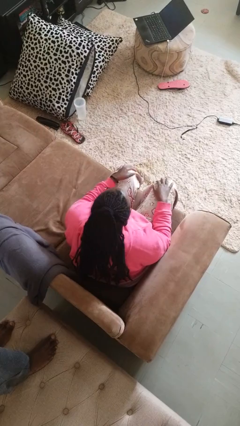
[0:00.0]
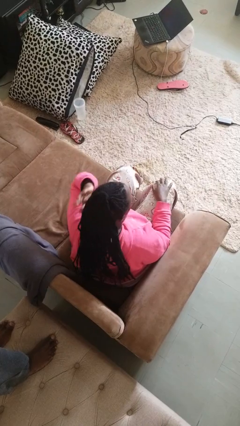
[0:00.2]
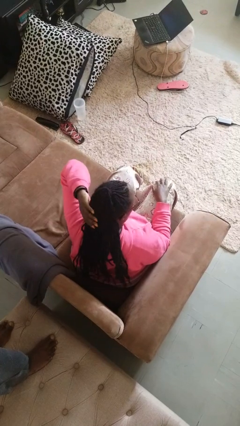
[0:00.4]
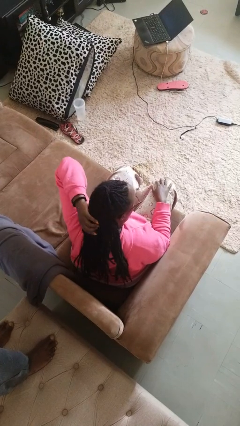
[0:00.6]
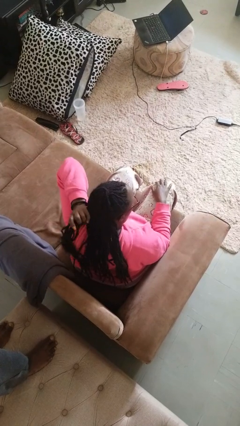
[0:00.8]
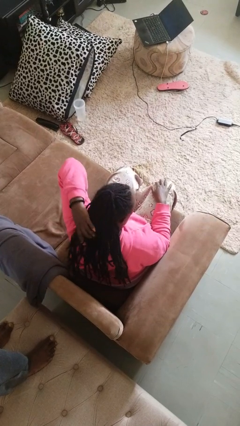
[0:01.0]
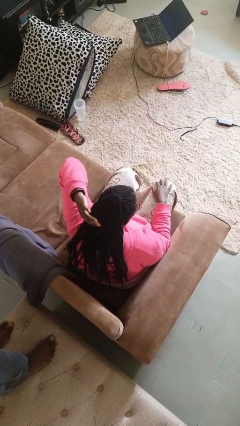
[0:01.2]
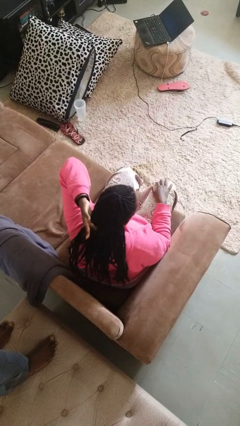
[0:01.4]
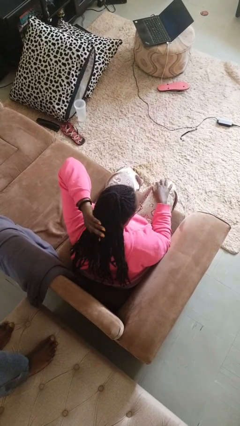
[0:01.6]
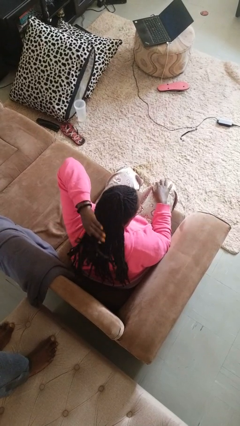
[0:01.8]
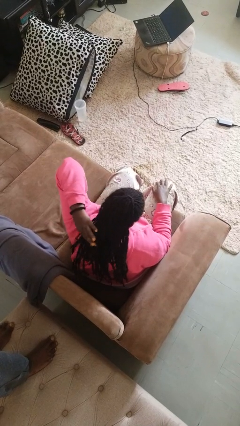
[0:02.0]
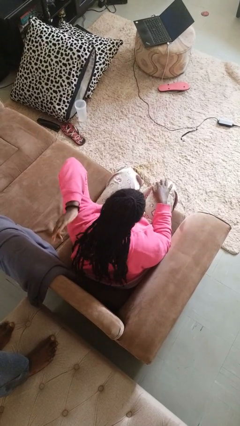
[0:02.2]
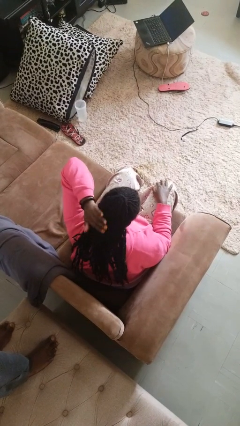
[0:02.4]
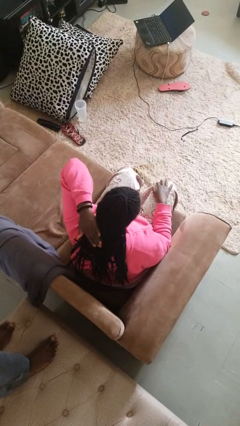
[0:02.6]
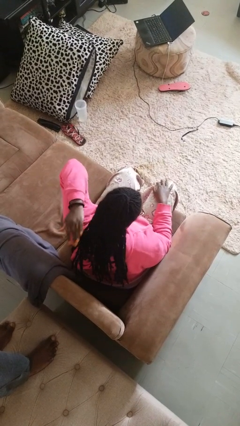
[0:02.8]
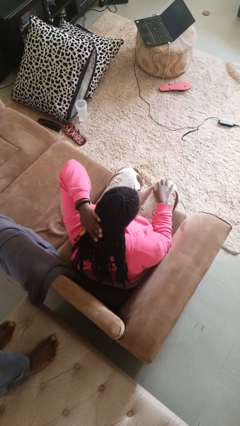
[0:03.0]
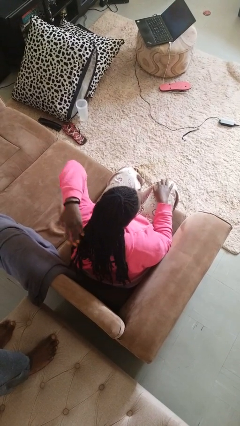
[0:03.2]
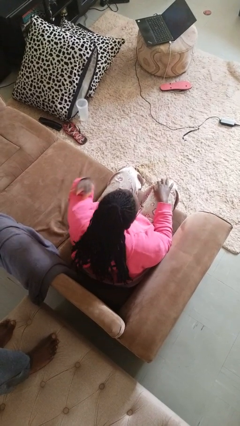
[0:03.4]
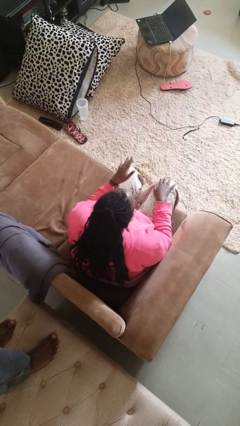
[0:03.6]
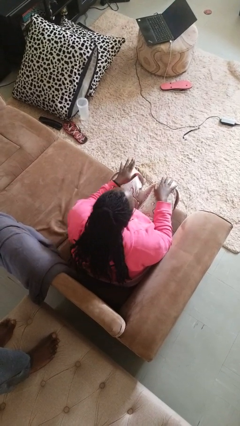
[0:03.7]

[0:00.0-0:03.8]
person strokes hair

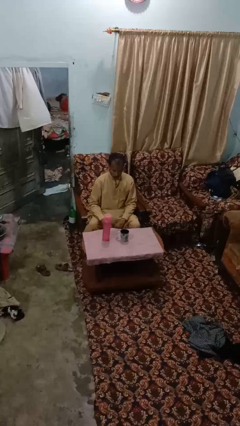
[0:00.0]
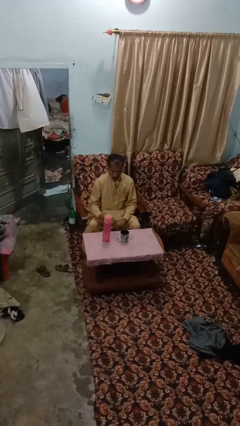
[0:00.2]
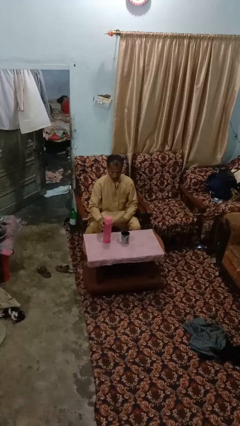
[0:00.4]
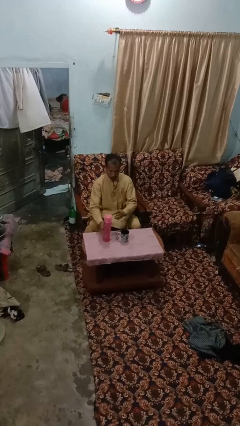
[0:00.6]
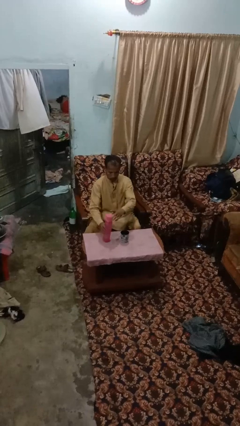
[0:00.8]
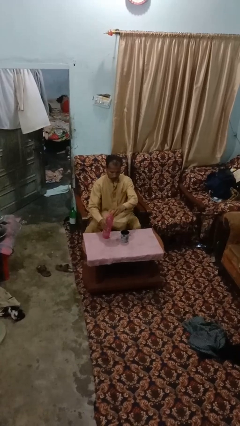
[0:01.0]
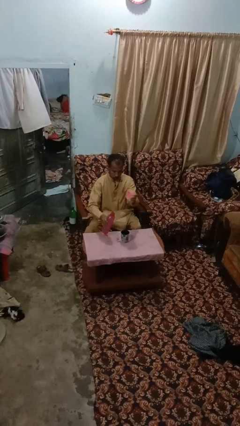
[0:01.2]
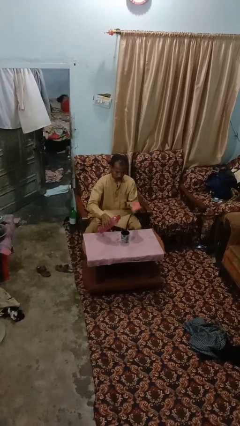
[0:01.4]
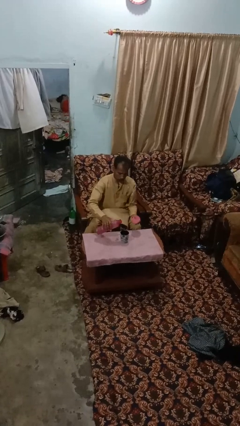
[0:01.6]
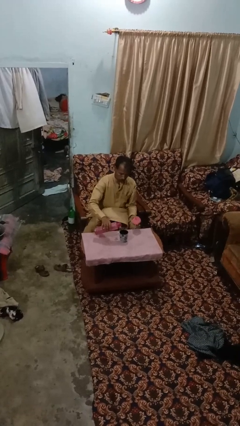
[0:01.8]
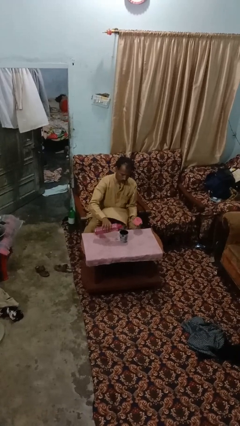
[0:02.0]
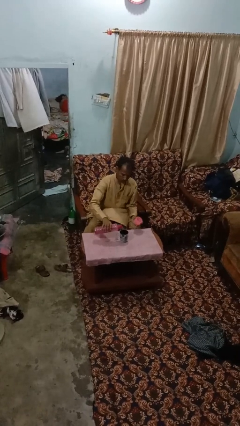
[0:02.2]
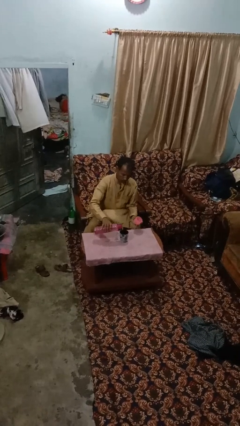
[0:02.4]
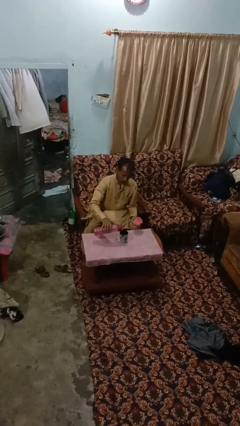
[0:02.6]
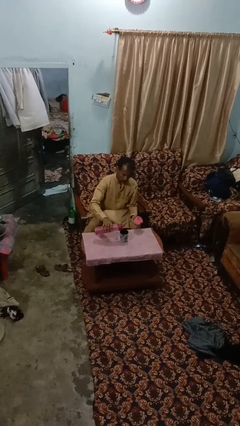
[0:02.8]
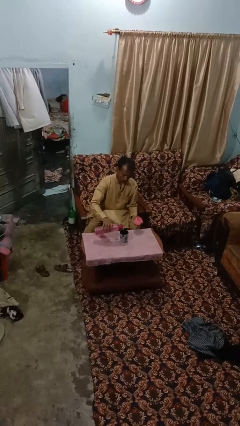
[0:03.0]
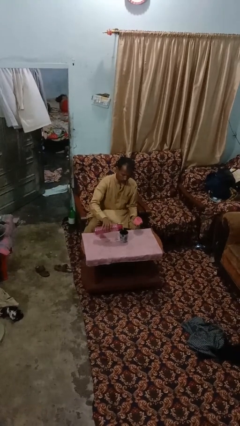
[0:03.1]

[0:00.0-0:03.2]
person pours liquid into cup

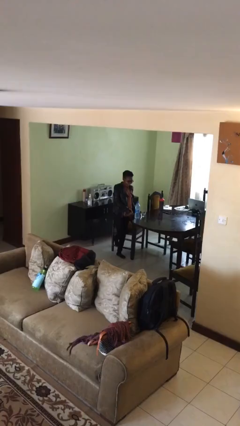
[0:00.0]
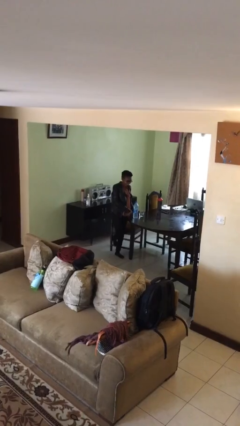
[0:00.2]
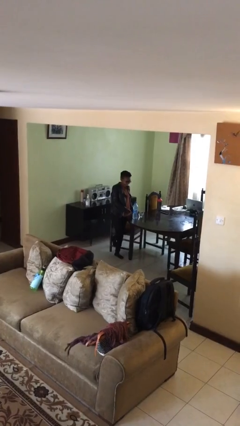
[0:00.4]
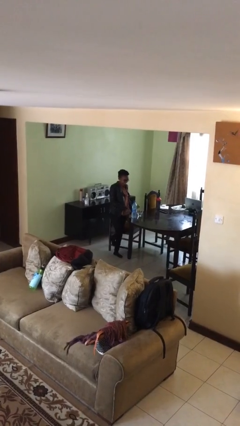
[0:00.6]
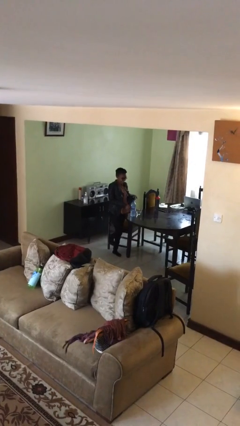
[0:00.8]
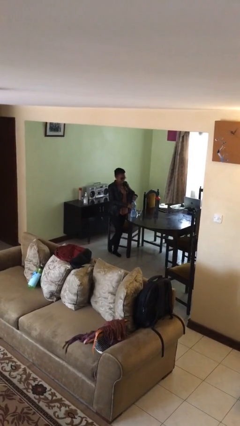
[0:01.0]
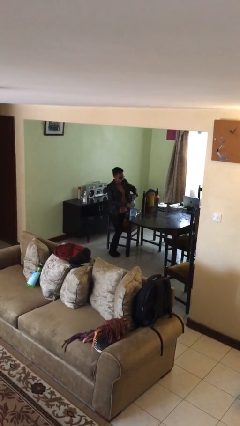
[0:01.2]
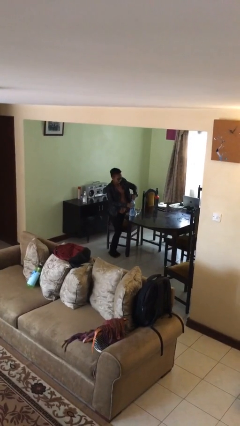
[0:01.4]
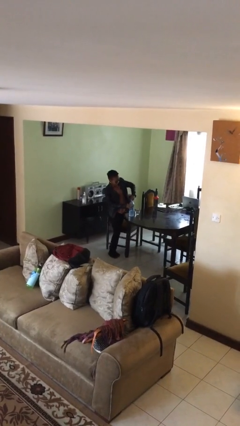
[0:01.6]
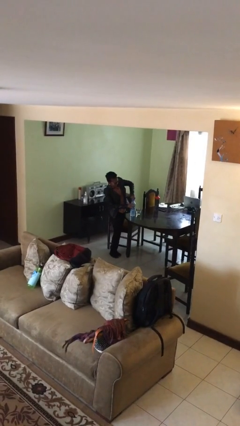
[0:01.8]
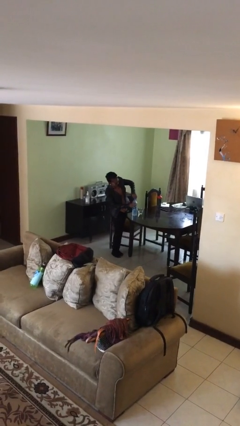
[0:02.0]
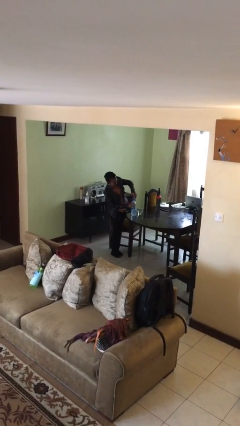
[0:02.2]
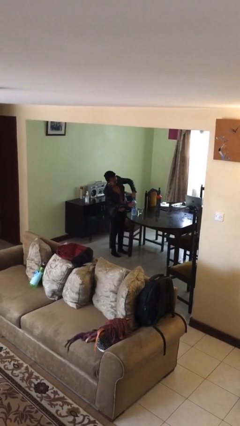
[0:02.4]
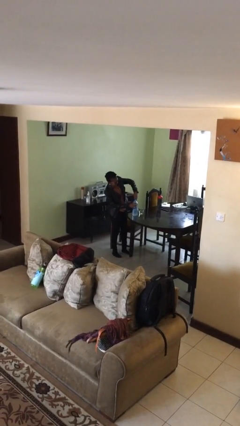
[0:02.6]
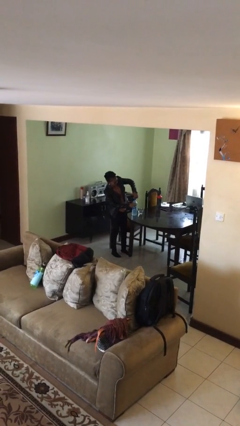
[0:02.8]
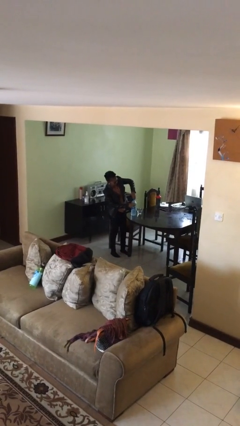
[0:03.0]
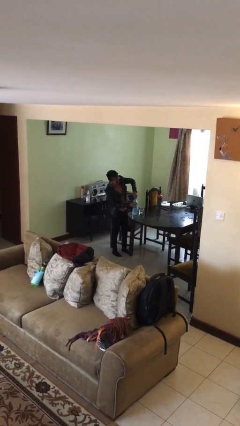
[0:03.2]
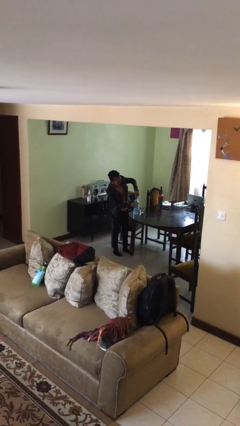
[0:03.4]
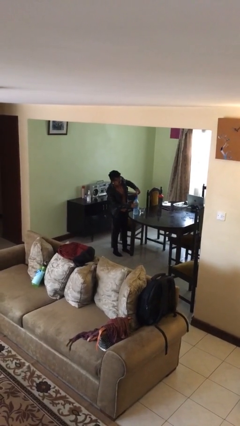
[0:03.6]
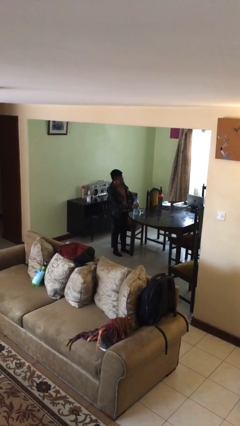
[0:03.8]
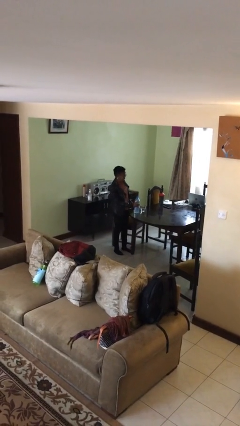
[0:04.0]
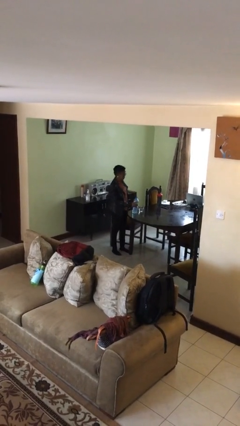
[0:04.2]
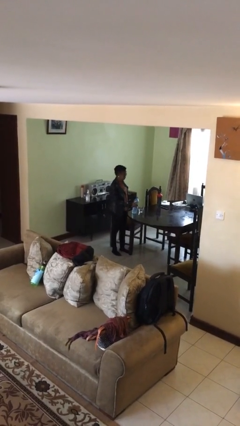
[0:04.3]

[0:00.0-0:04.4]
person unscrews lid from bottle

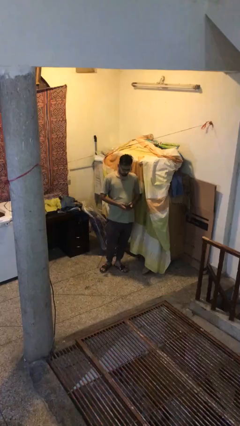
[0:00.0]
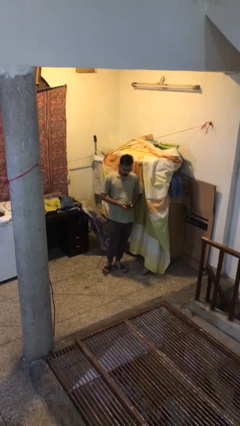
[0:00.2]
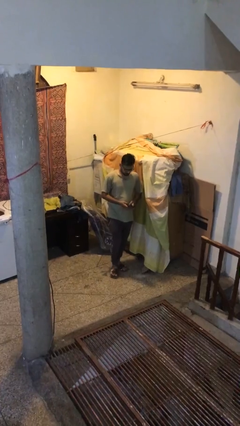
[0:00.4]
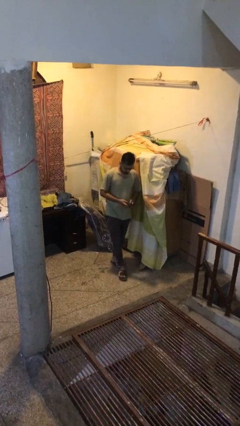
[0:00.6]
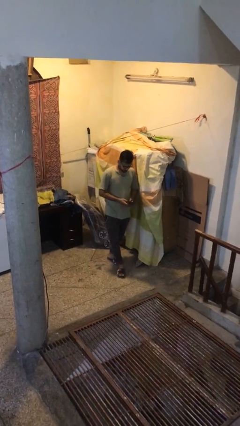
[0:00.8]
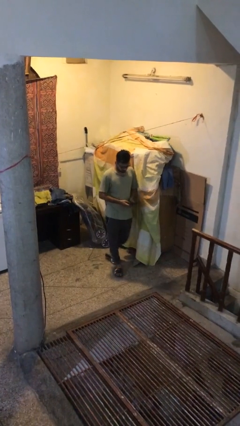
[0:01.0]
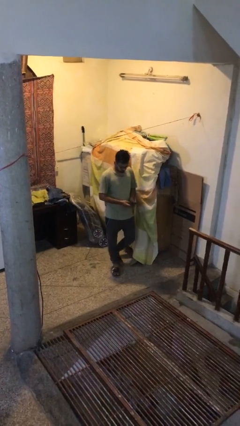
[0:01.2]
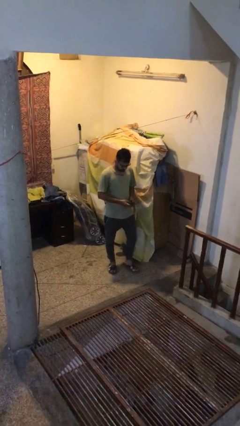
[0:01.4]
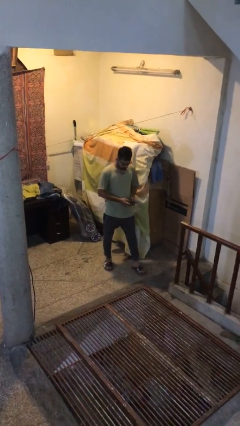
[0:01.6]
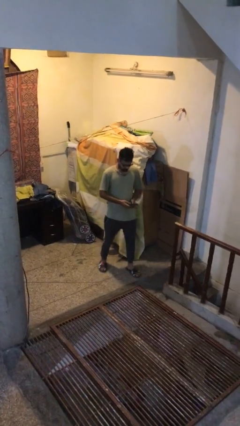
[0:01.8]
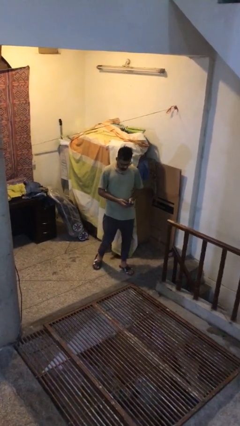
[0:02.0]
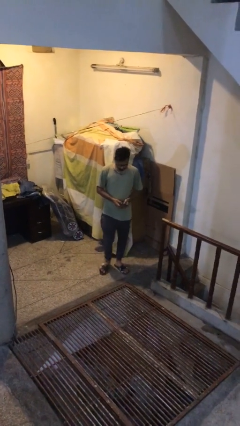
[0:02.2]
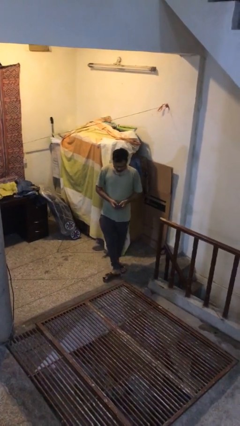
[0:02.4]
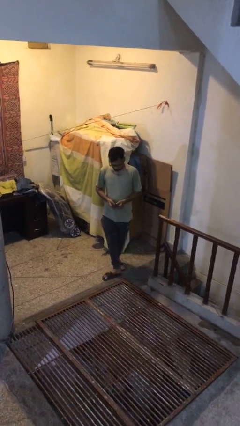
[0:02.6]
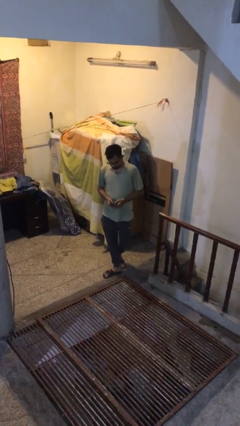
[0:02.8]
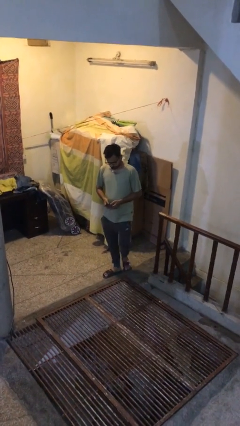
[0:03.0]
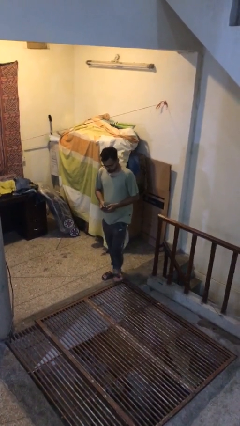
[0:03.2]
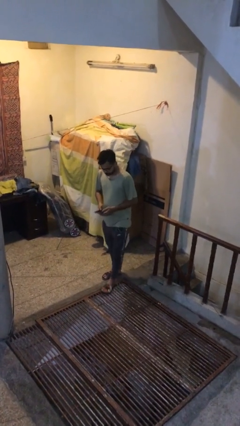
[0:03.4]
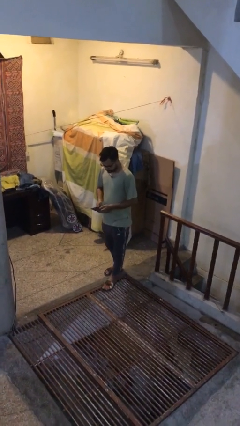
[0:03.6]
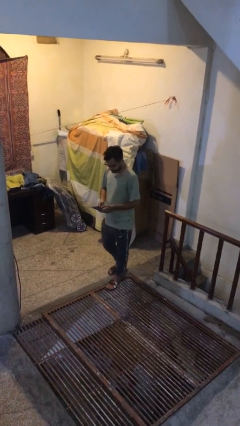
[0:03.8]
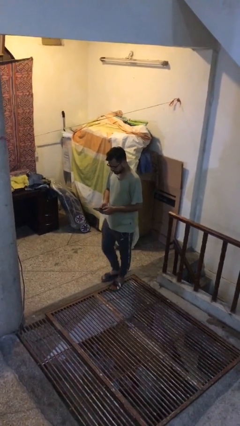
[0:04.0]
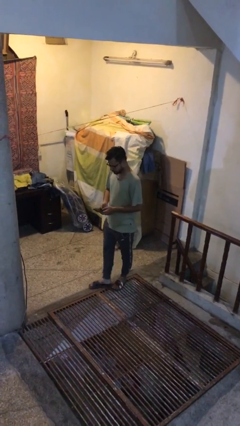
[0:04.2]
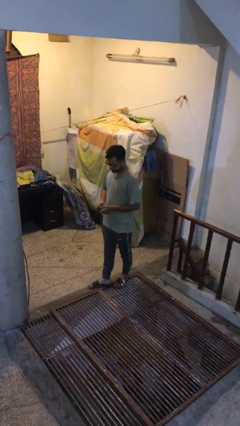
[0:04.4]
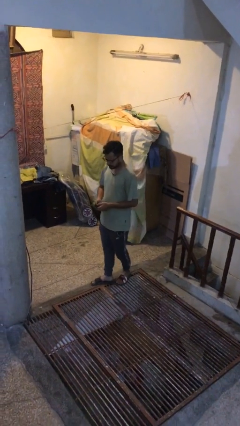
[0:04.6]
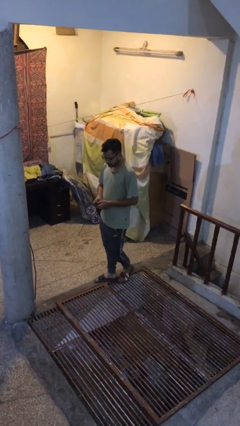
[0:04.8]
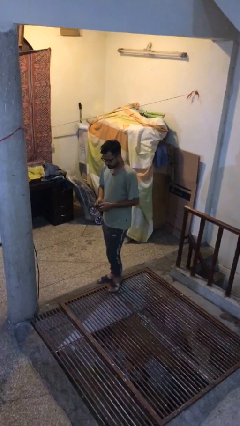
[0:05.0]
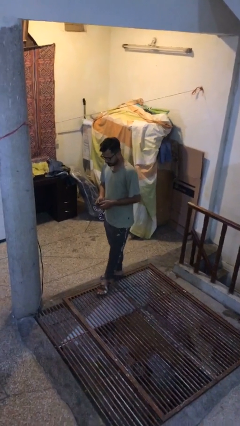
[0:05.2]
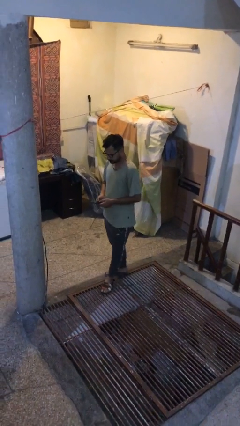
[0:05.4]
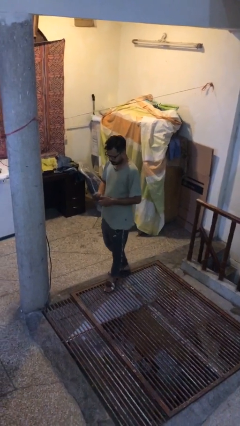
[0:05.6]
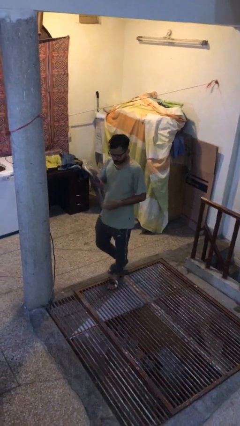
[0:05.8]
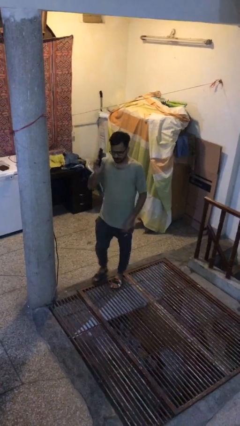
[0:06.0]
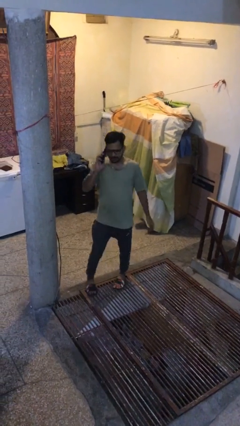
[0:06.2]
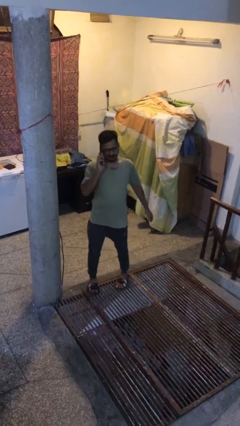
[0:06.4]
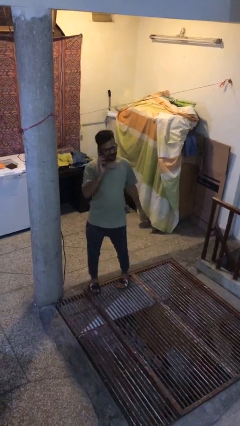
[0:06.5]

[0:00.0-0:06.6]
person texts on phone
